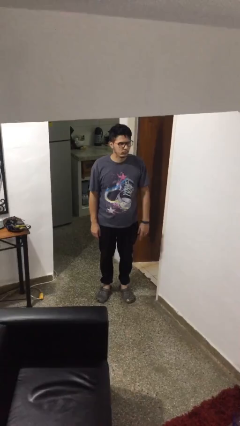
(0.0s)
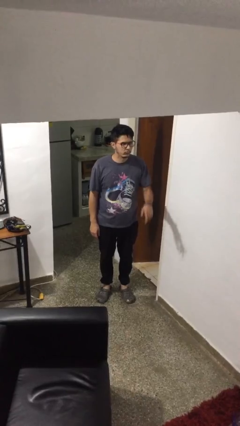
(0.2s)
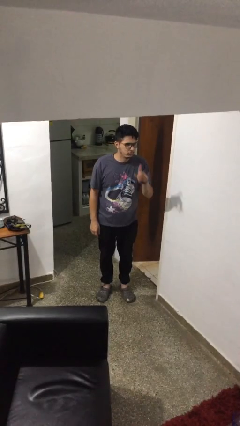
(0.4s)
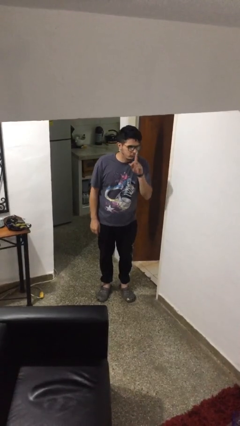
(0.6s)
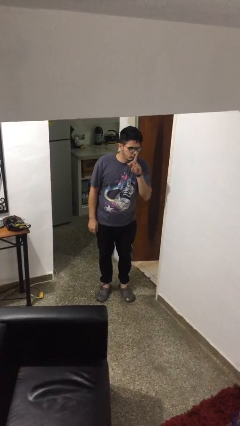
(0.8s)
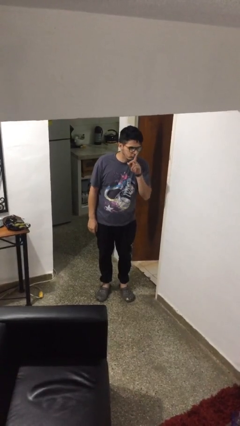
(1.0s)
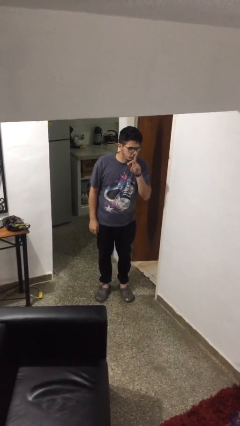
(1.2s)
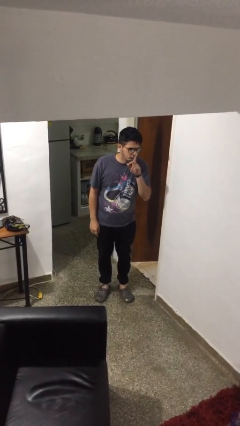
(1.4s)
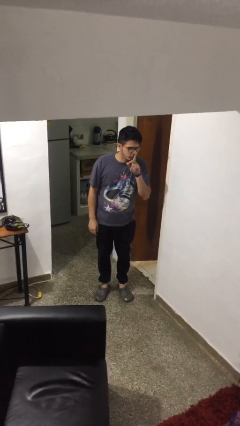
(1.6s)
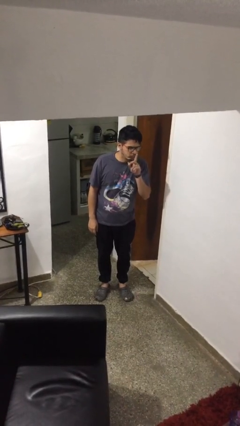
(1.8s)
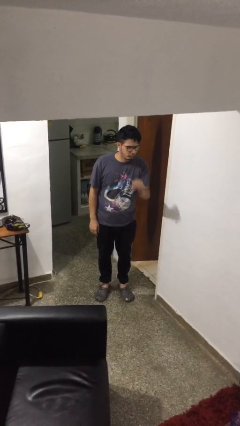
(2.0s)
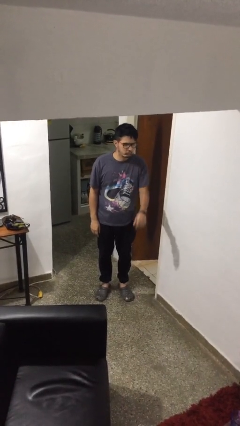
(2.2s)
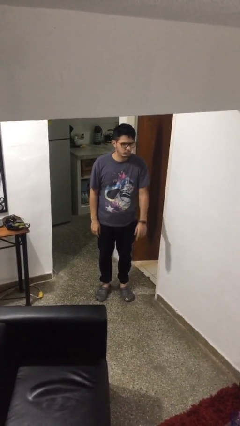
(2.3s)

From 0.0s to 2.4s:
person gestures be quiet

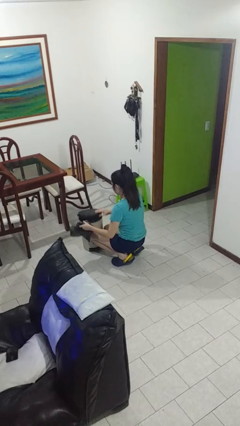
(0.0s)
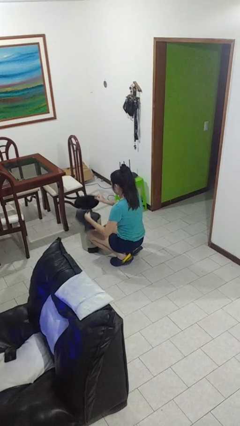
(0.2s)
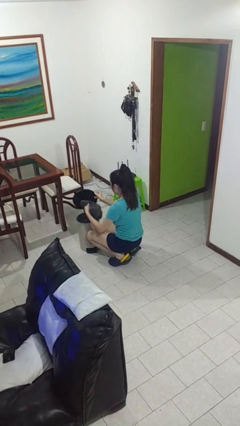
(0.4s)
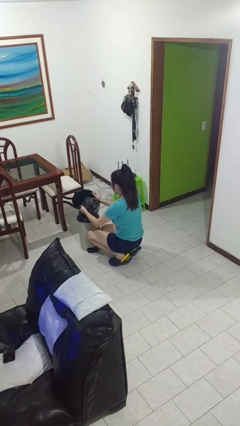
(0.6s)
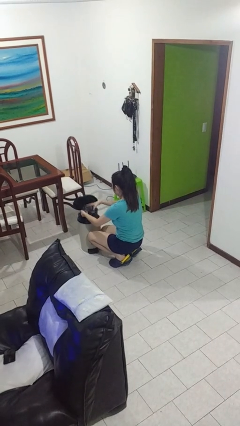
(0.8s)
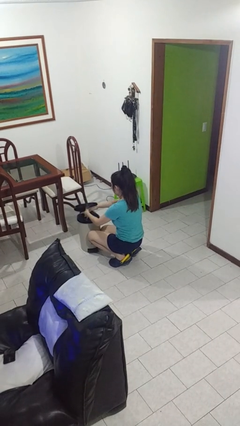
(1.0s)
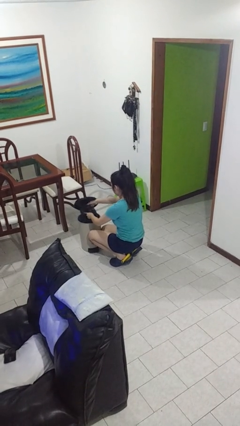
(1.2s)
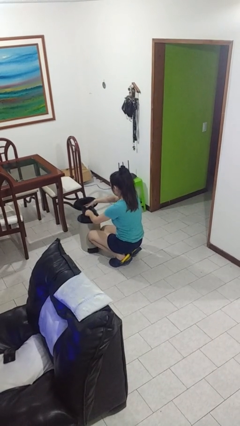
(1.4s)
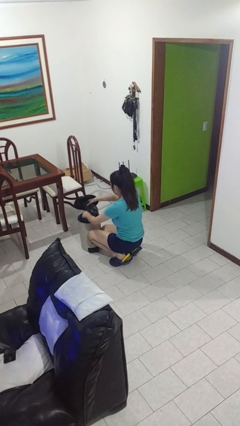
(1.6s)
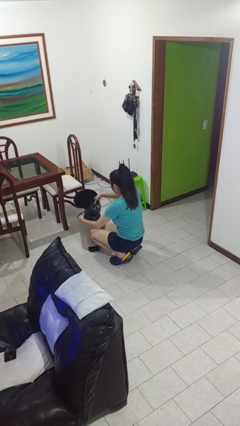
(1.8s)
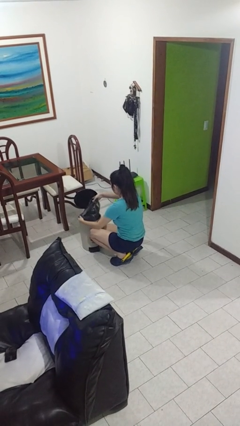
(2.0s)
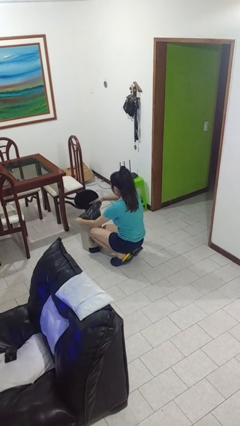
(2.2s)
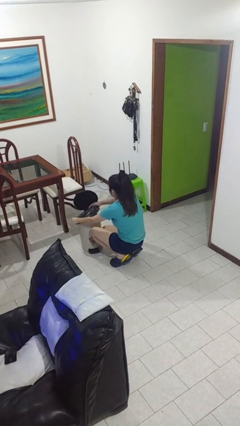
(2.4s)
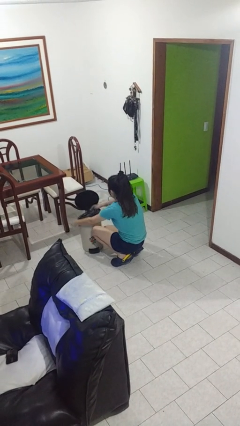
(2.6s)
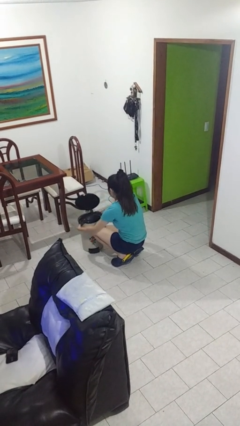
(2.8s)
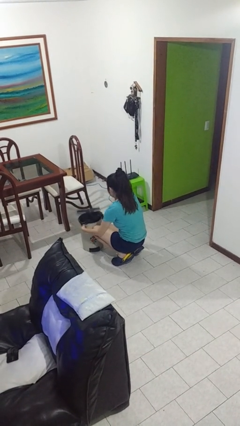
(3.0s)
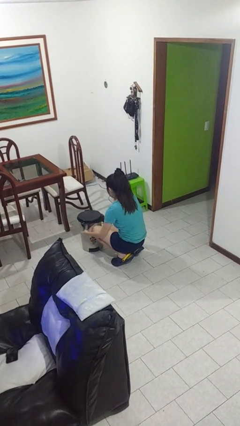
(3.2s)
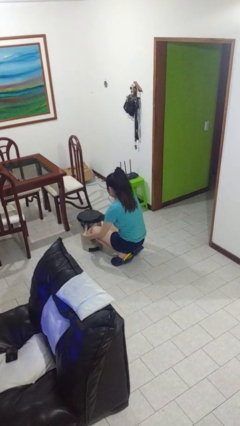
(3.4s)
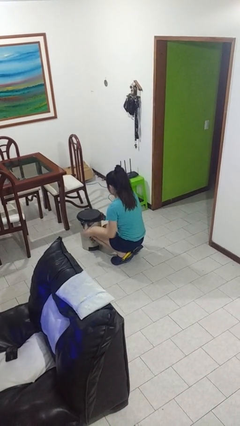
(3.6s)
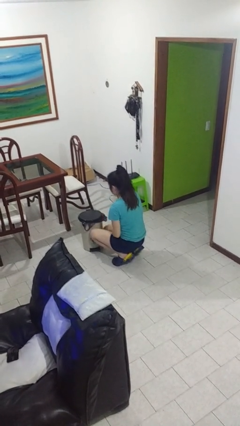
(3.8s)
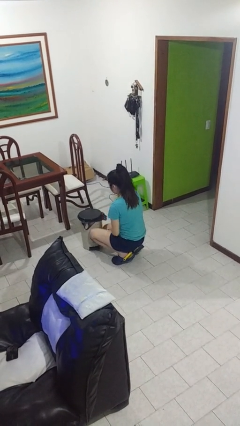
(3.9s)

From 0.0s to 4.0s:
person inserts trashbag into trashcan

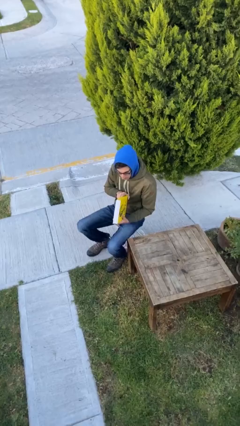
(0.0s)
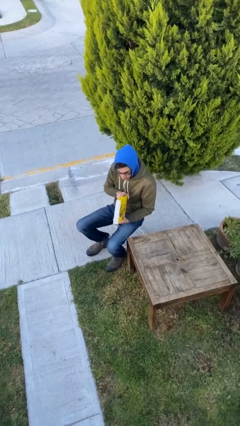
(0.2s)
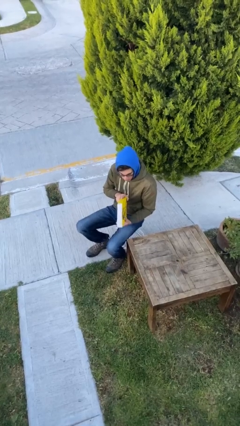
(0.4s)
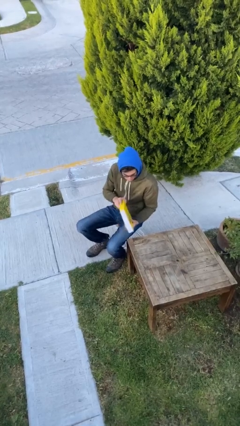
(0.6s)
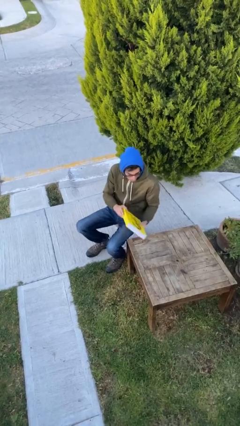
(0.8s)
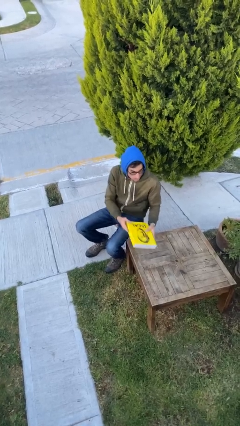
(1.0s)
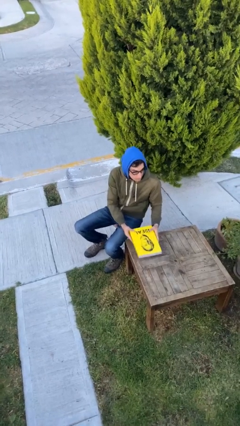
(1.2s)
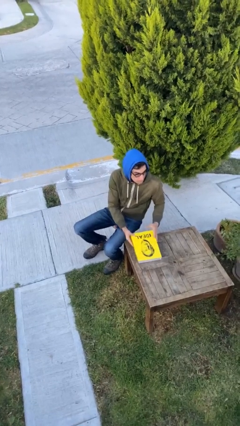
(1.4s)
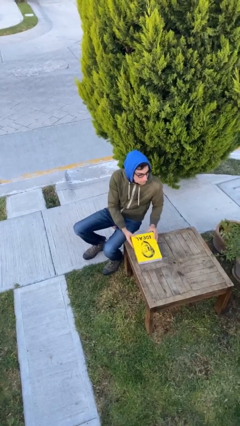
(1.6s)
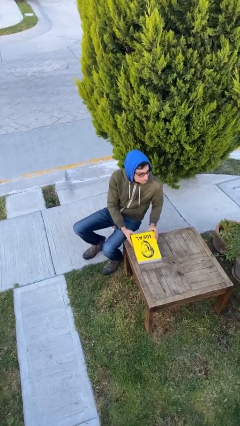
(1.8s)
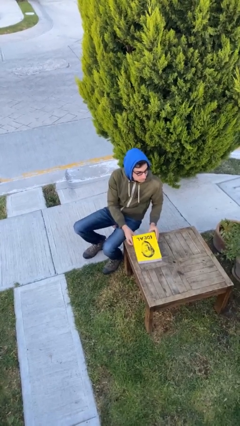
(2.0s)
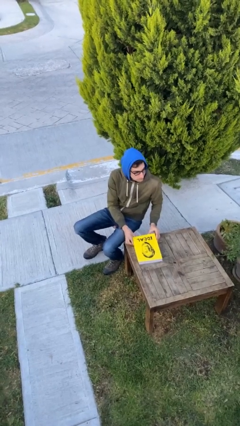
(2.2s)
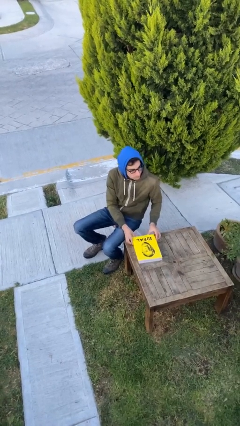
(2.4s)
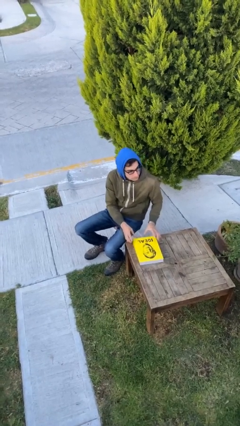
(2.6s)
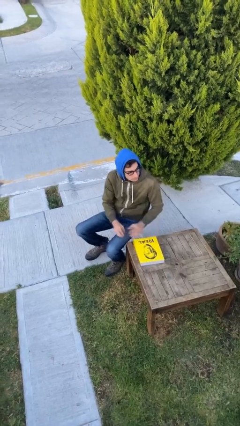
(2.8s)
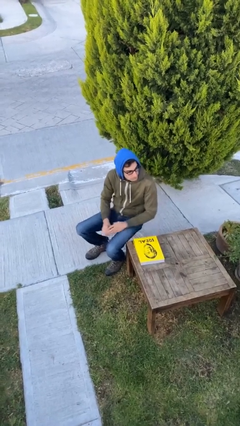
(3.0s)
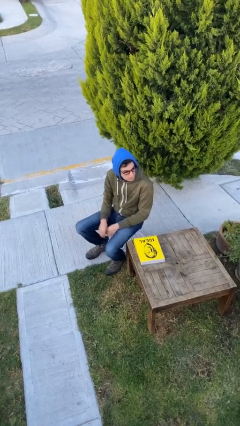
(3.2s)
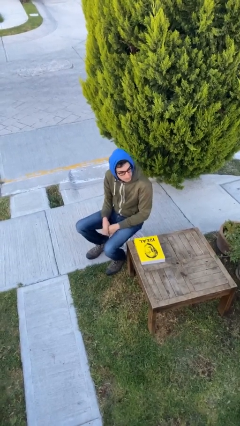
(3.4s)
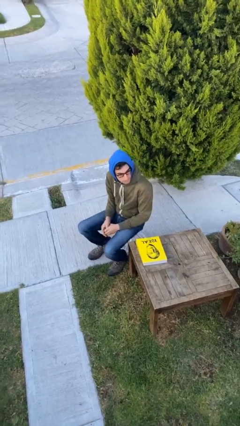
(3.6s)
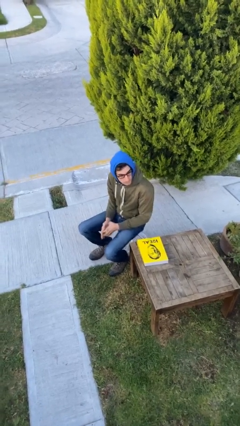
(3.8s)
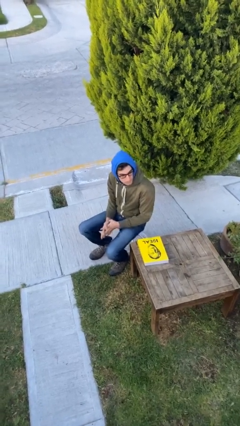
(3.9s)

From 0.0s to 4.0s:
person puts down object on table

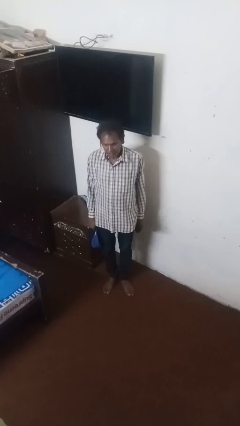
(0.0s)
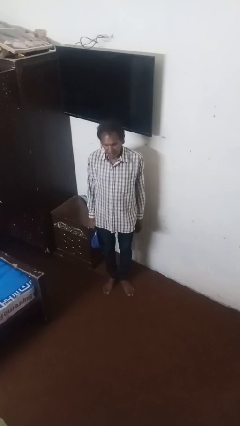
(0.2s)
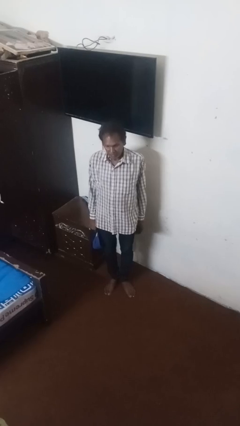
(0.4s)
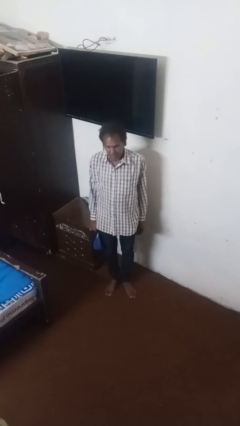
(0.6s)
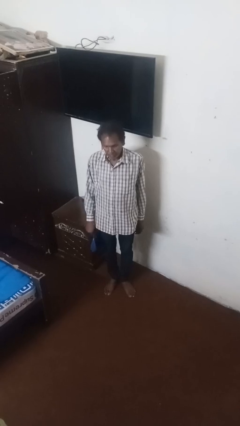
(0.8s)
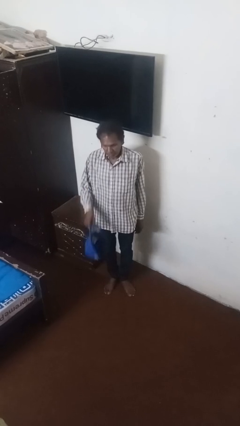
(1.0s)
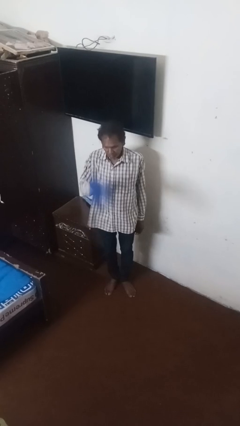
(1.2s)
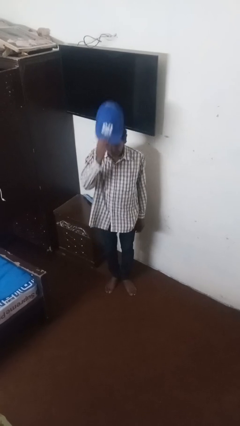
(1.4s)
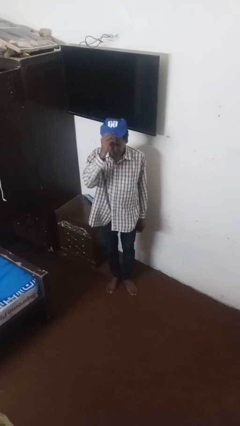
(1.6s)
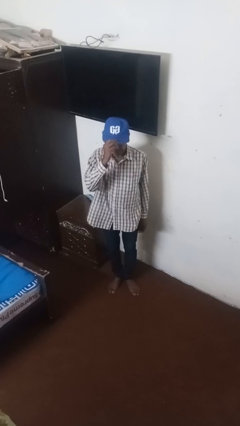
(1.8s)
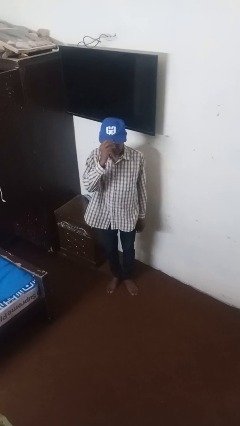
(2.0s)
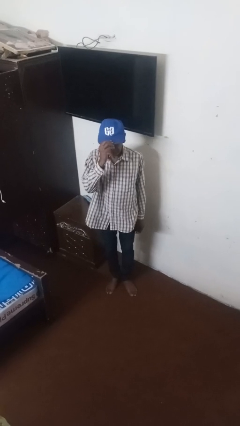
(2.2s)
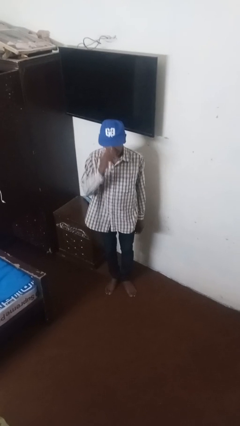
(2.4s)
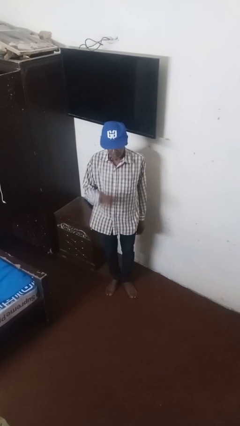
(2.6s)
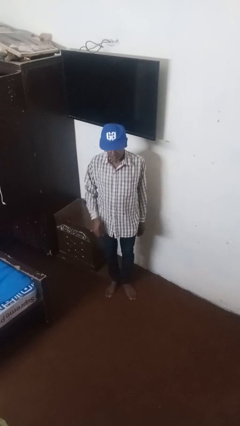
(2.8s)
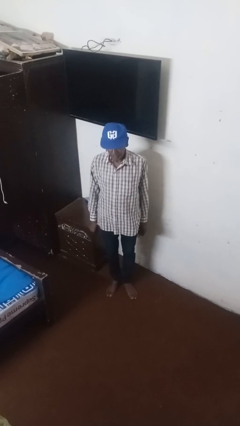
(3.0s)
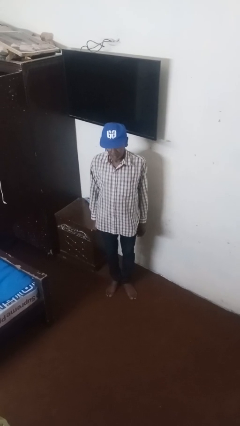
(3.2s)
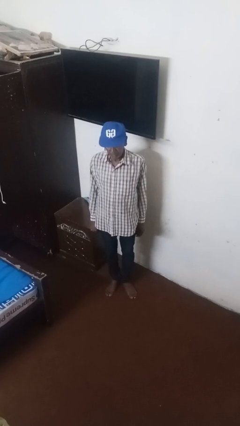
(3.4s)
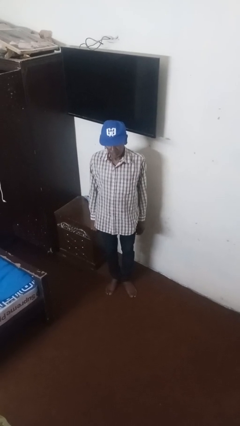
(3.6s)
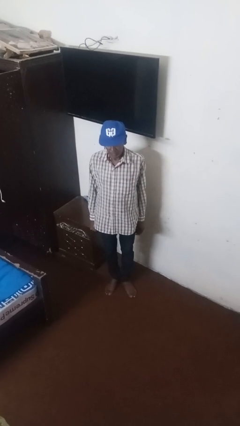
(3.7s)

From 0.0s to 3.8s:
person puts on hat

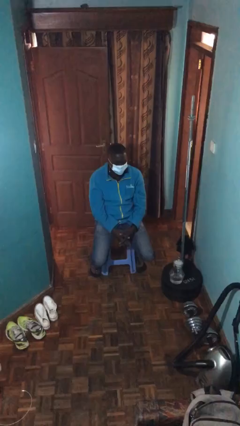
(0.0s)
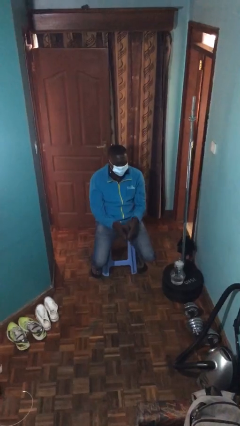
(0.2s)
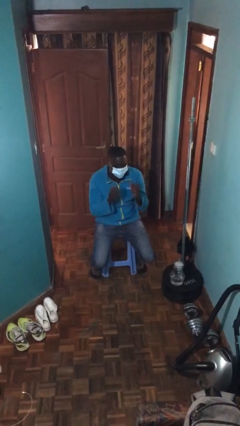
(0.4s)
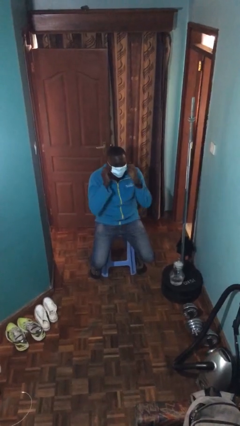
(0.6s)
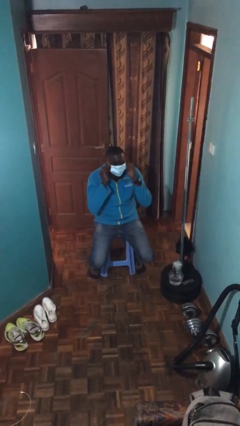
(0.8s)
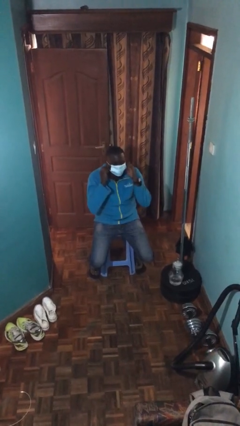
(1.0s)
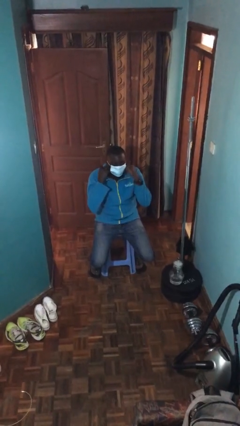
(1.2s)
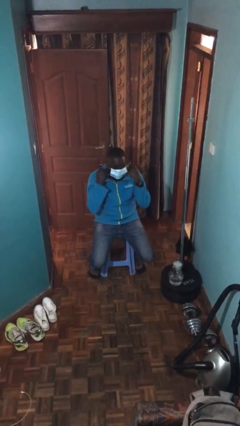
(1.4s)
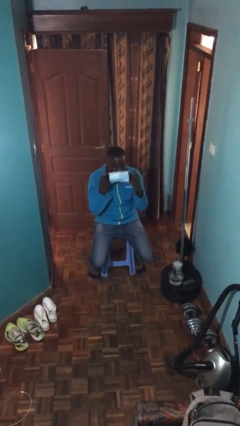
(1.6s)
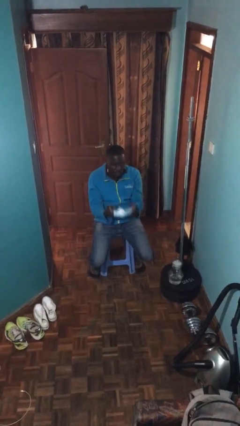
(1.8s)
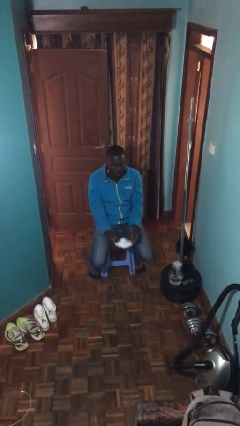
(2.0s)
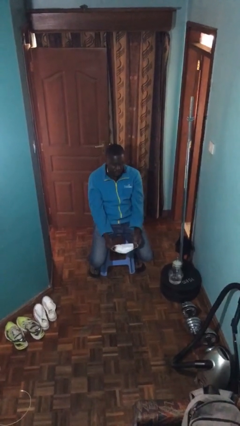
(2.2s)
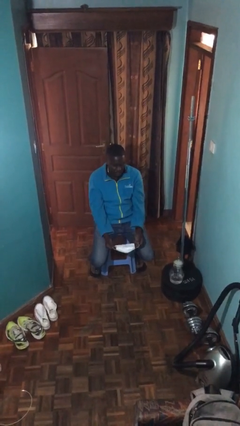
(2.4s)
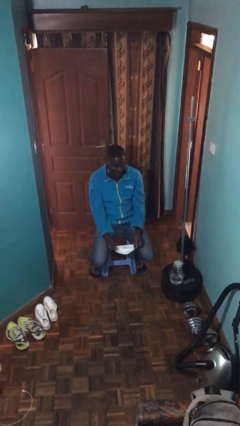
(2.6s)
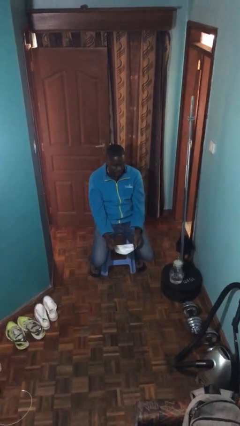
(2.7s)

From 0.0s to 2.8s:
person takes off facemask

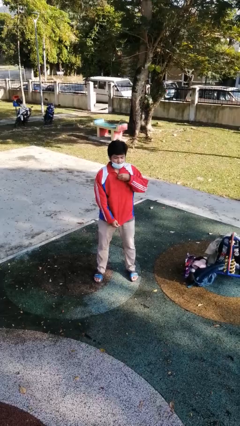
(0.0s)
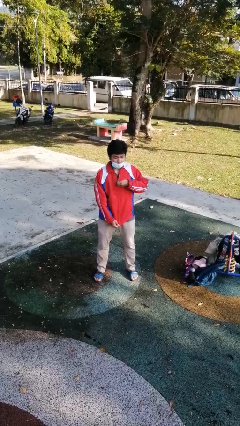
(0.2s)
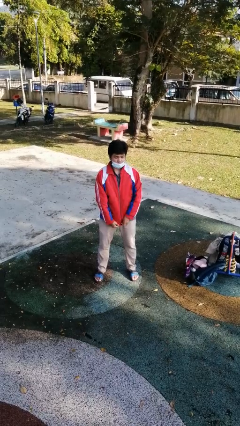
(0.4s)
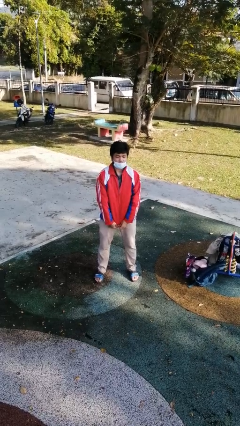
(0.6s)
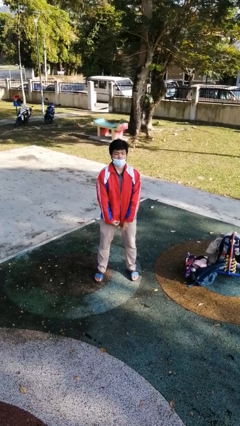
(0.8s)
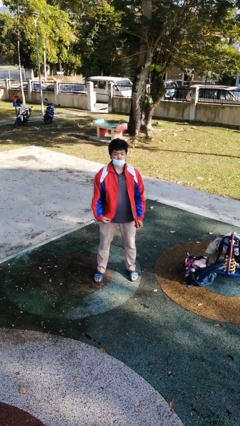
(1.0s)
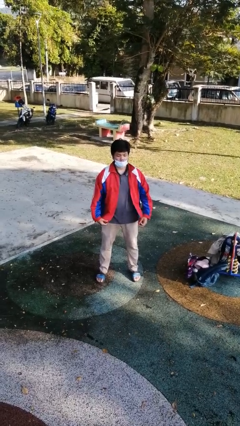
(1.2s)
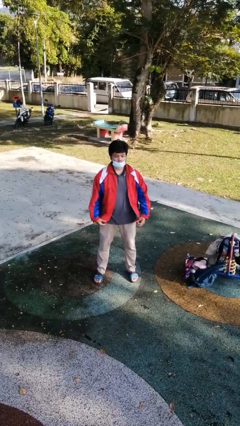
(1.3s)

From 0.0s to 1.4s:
person unzips jacket
